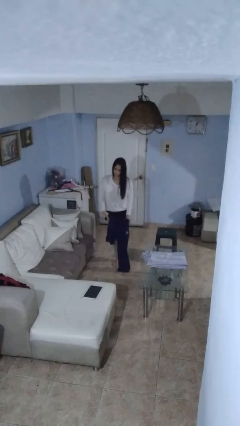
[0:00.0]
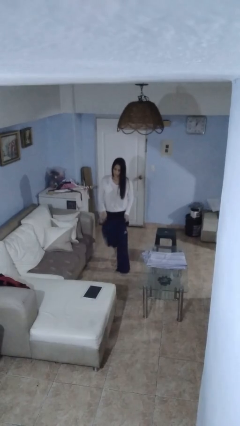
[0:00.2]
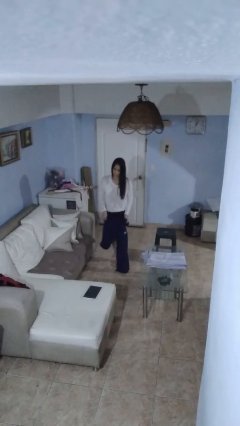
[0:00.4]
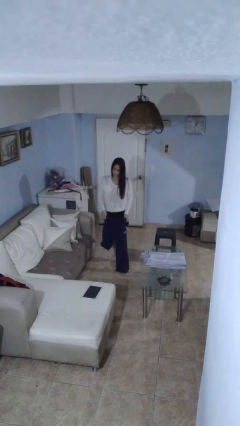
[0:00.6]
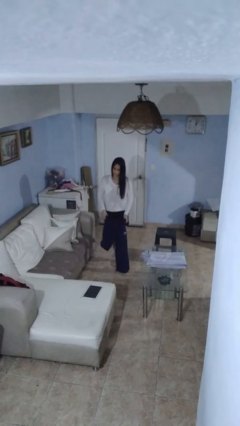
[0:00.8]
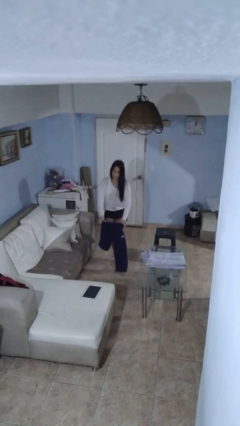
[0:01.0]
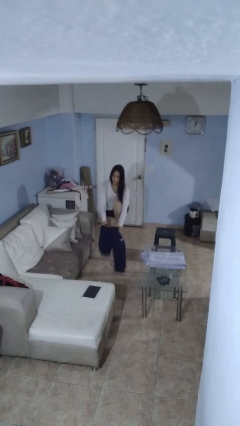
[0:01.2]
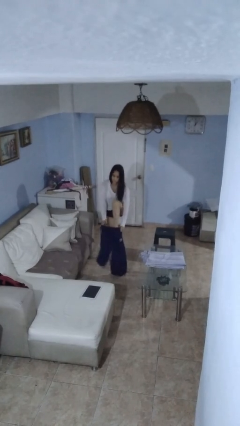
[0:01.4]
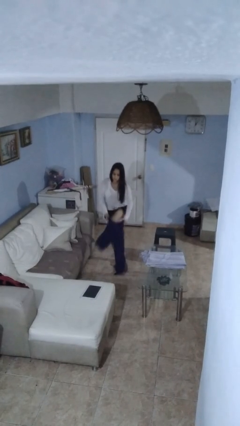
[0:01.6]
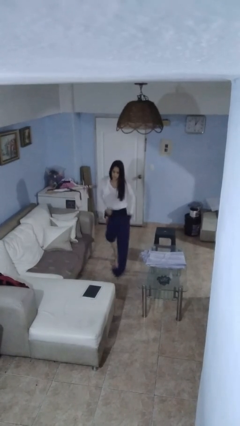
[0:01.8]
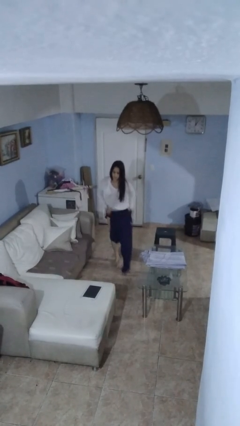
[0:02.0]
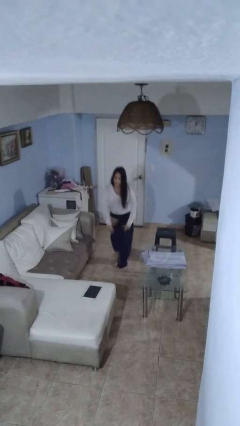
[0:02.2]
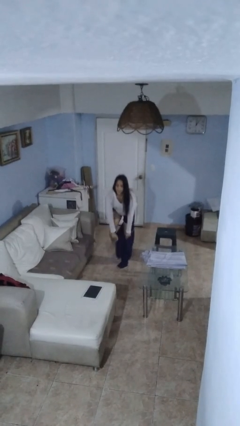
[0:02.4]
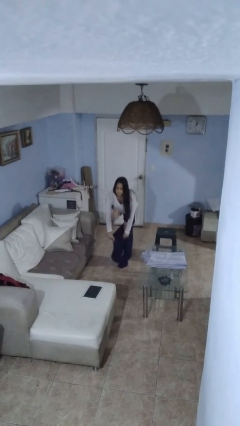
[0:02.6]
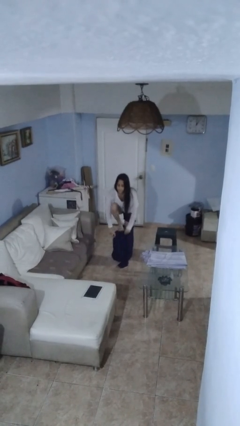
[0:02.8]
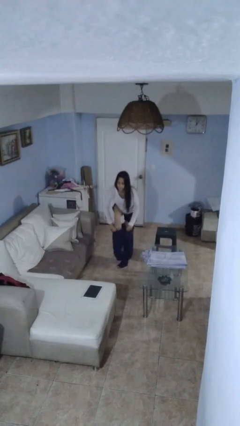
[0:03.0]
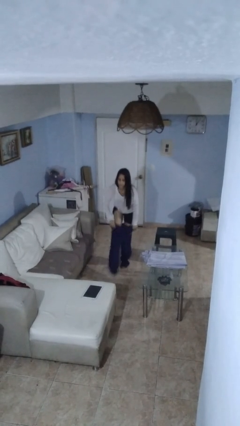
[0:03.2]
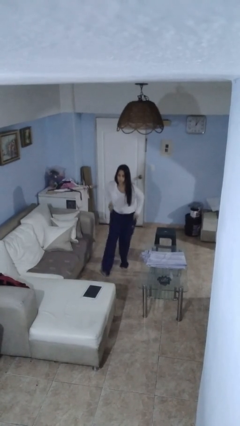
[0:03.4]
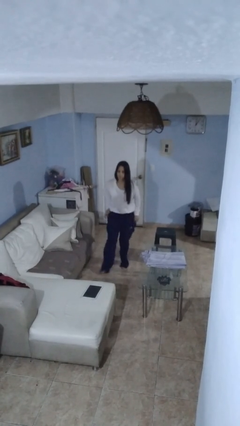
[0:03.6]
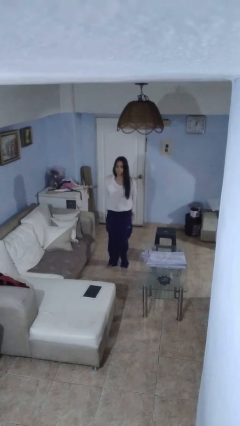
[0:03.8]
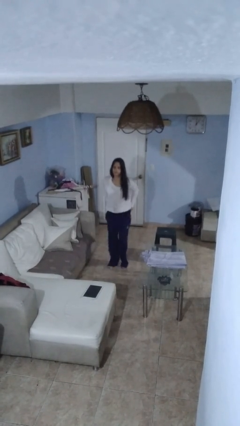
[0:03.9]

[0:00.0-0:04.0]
person puts on pants

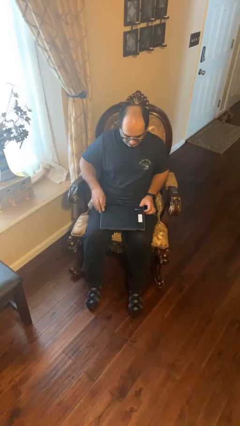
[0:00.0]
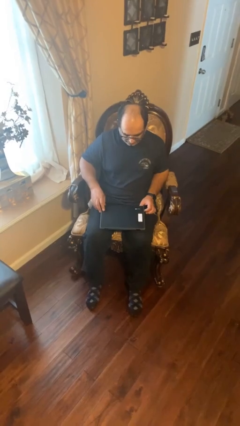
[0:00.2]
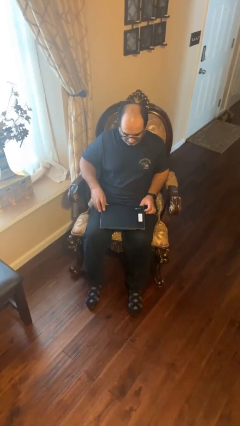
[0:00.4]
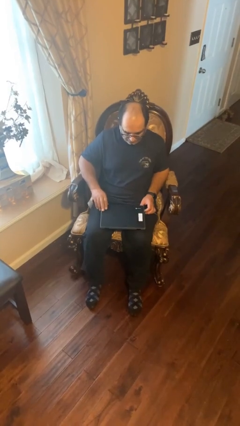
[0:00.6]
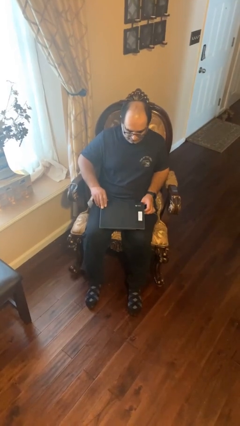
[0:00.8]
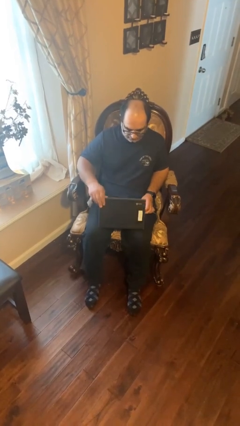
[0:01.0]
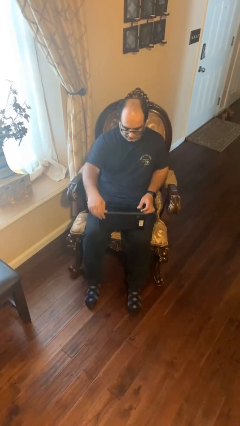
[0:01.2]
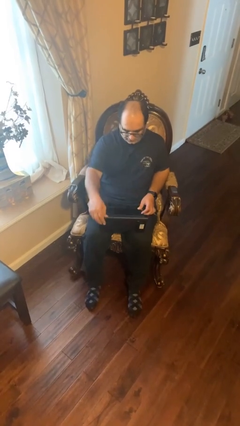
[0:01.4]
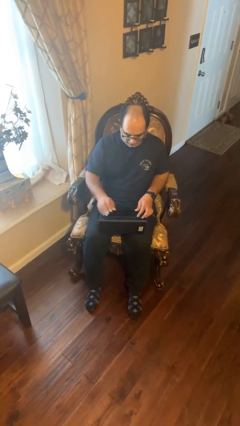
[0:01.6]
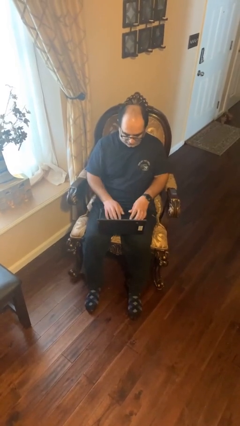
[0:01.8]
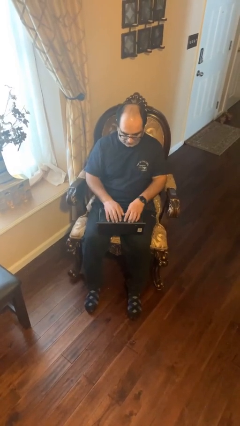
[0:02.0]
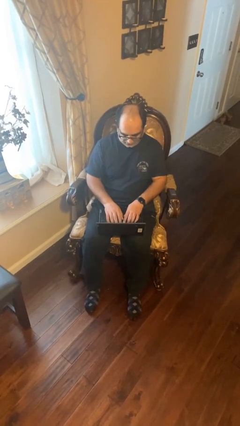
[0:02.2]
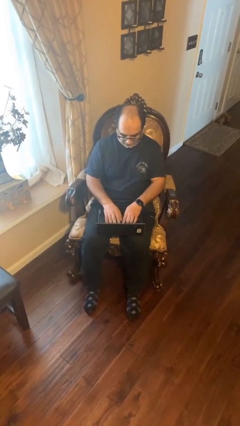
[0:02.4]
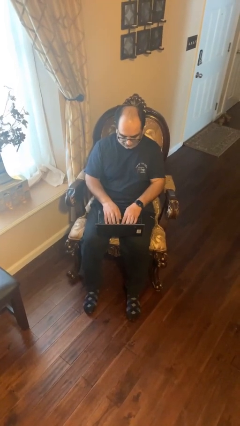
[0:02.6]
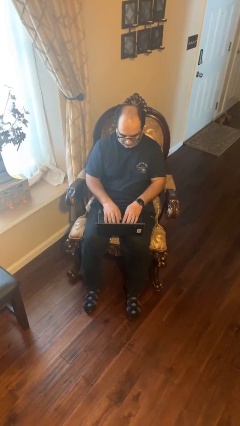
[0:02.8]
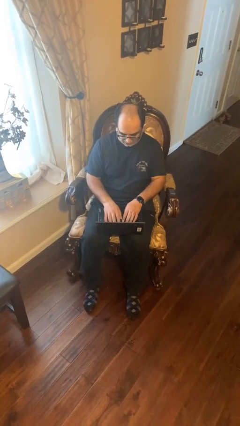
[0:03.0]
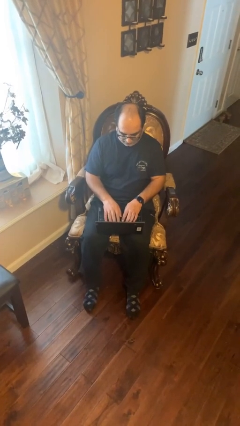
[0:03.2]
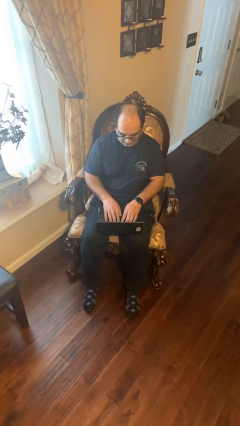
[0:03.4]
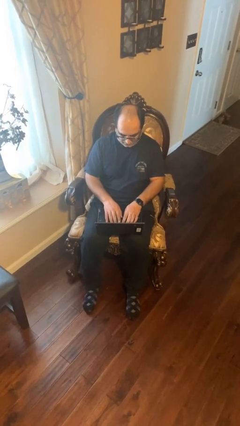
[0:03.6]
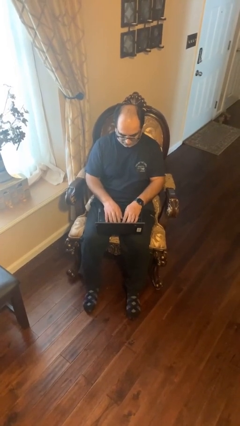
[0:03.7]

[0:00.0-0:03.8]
person interacts with laptop

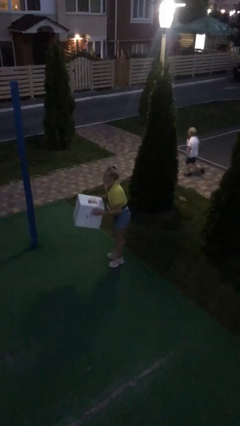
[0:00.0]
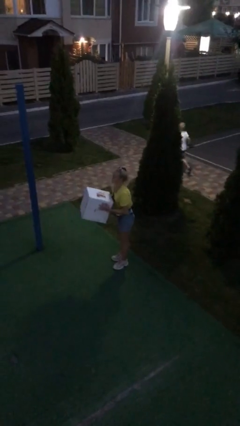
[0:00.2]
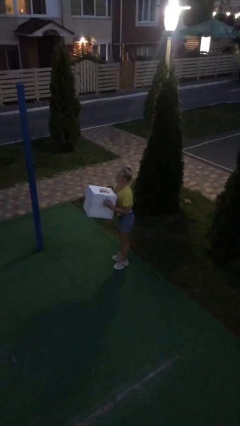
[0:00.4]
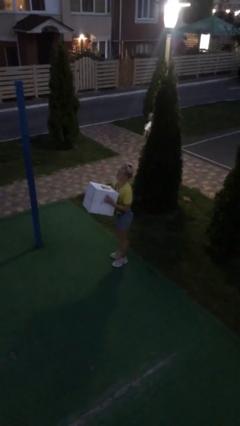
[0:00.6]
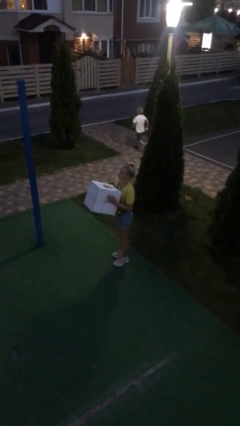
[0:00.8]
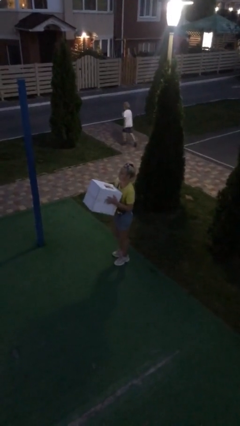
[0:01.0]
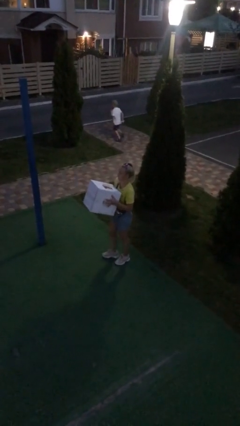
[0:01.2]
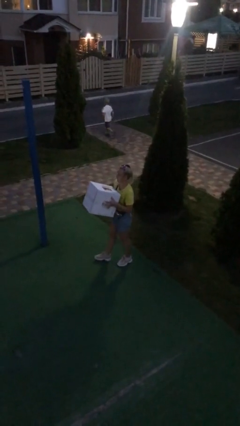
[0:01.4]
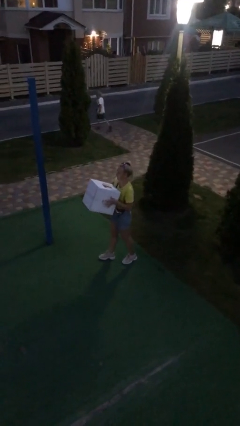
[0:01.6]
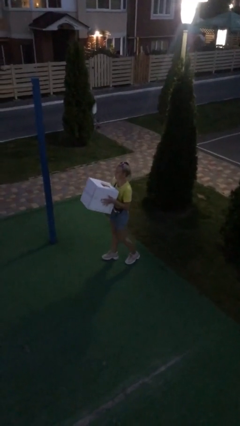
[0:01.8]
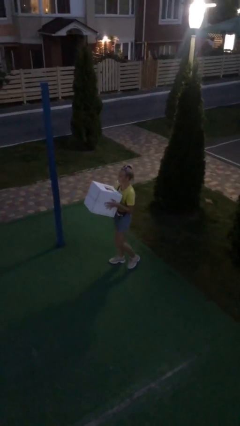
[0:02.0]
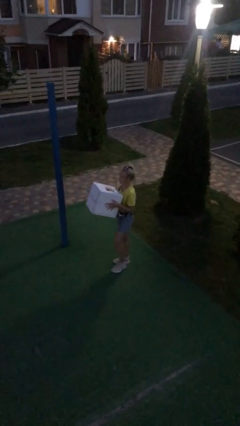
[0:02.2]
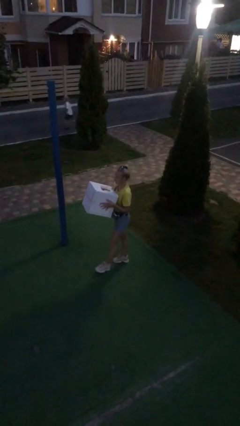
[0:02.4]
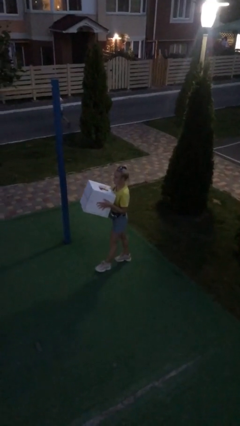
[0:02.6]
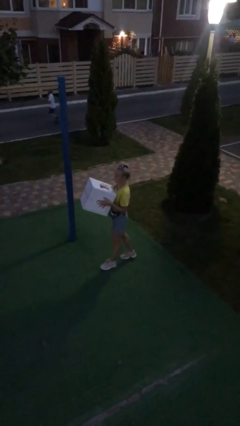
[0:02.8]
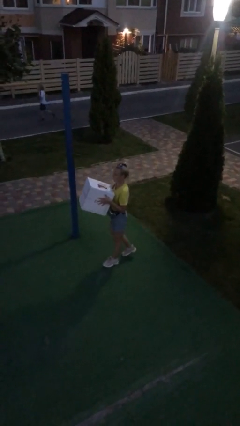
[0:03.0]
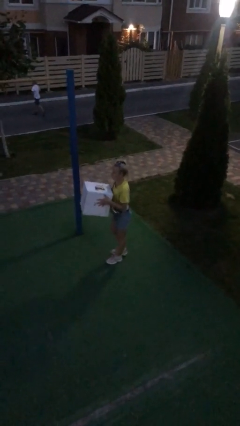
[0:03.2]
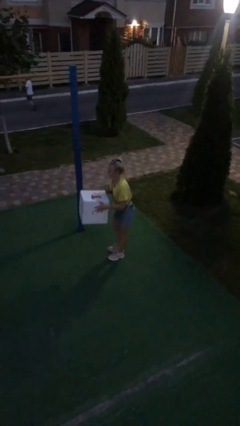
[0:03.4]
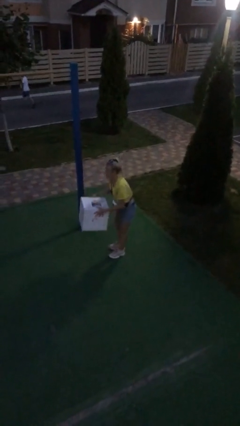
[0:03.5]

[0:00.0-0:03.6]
person carries heavy object

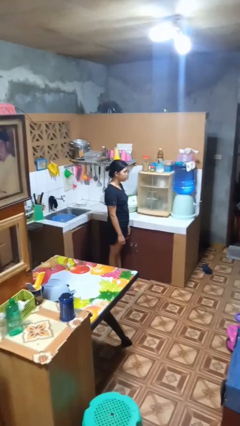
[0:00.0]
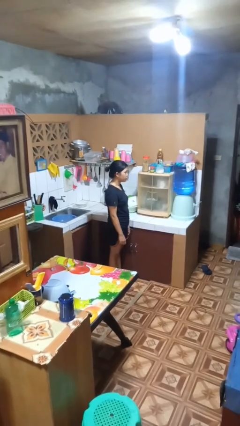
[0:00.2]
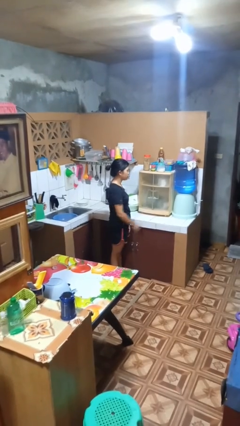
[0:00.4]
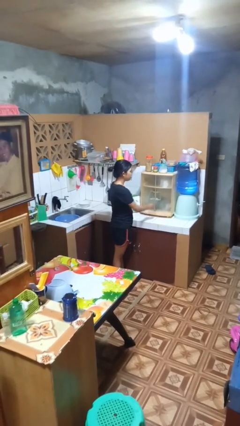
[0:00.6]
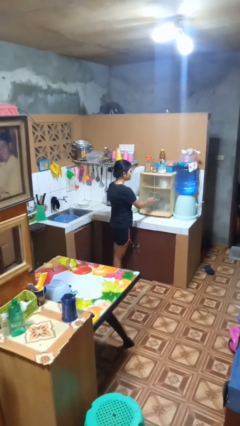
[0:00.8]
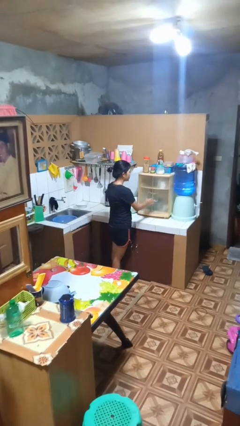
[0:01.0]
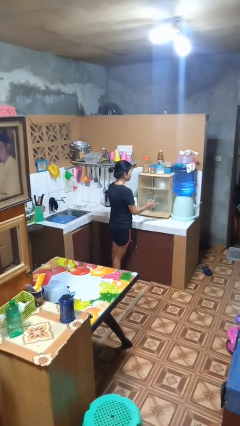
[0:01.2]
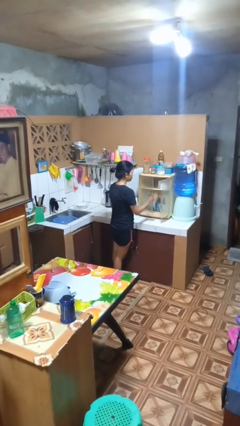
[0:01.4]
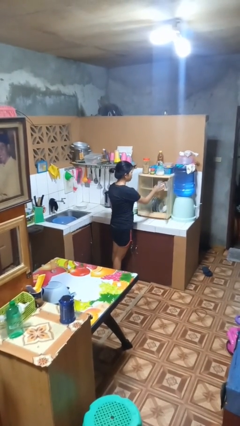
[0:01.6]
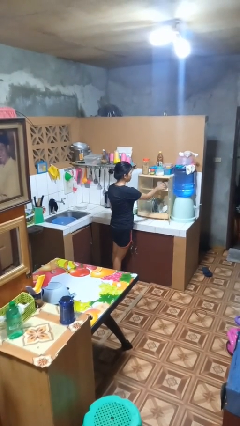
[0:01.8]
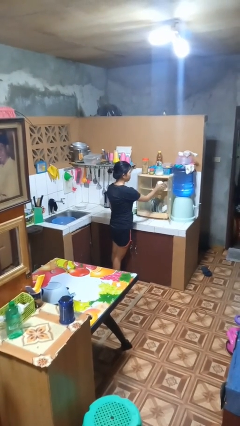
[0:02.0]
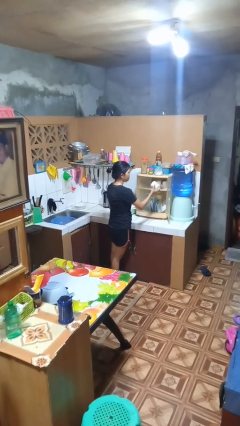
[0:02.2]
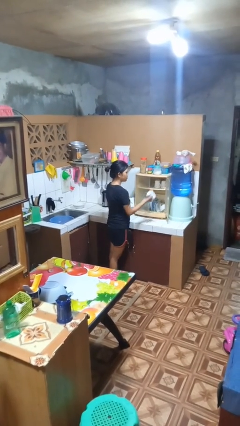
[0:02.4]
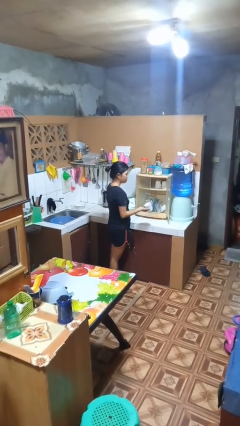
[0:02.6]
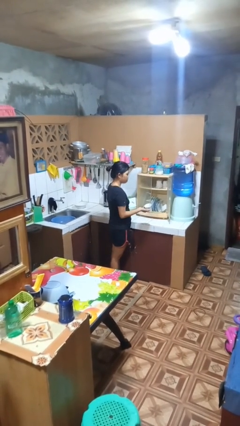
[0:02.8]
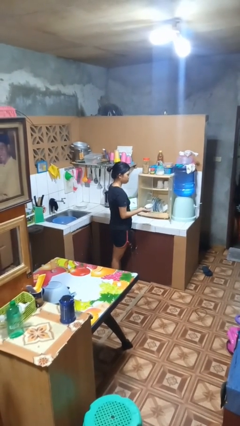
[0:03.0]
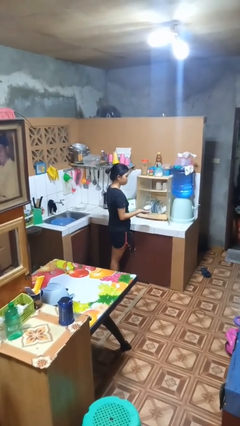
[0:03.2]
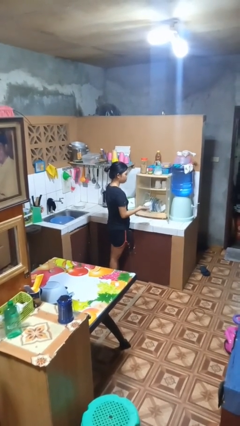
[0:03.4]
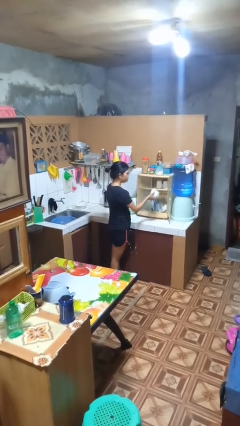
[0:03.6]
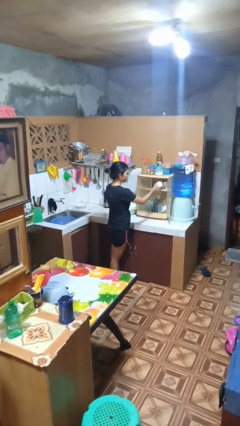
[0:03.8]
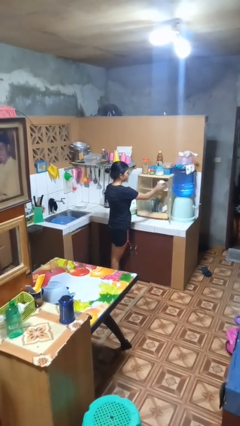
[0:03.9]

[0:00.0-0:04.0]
person takes object from kitchen drawer

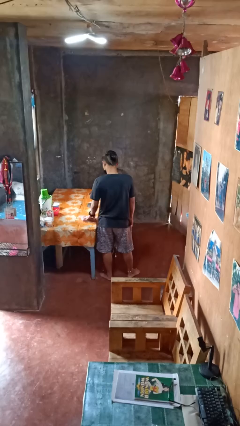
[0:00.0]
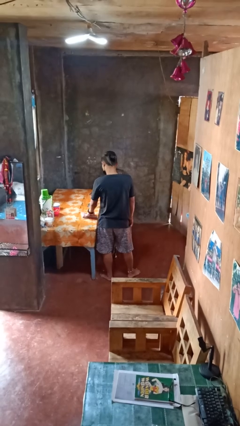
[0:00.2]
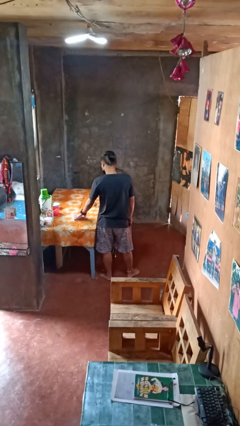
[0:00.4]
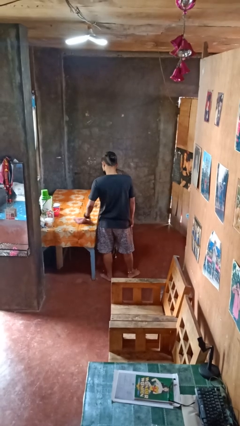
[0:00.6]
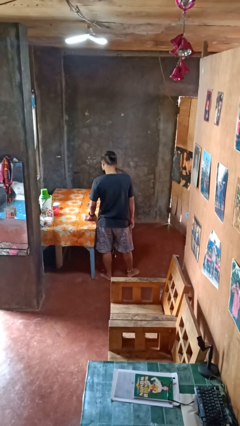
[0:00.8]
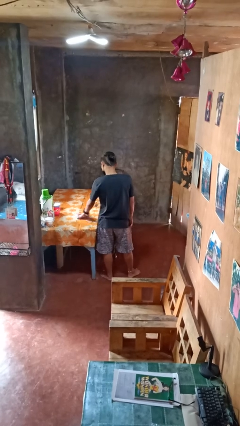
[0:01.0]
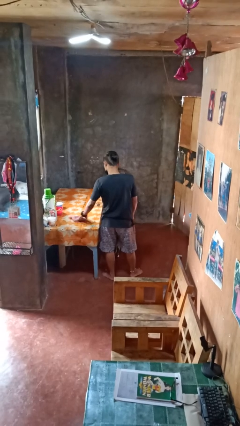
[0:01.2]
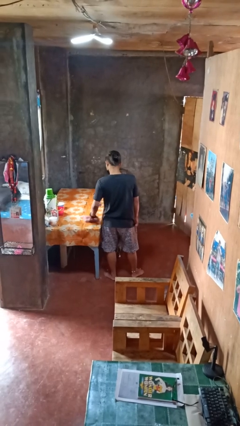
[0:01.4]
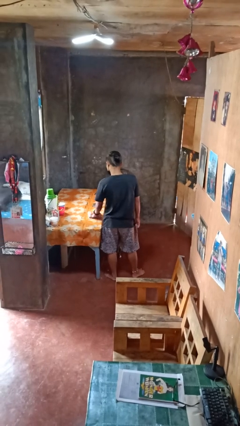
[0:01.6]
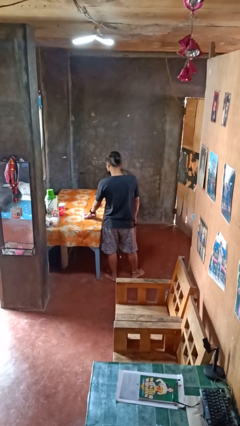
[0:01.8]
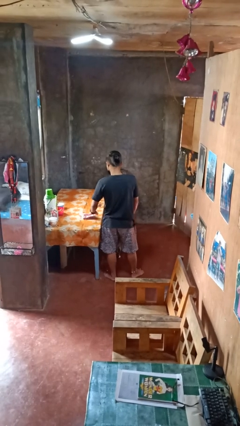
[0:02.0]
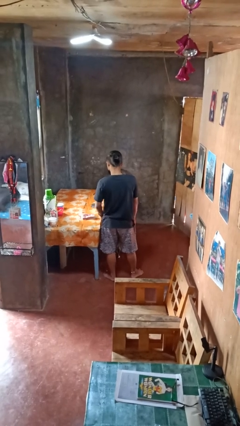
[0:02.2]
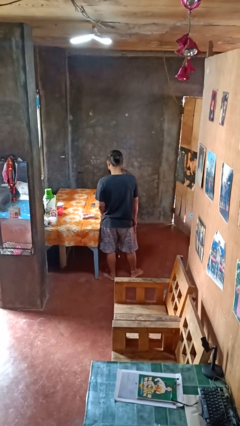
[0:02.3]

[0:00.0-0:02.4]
person cleans table with rag
